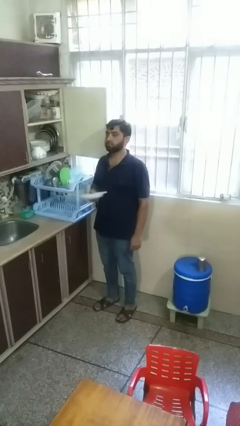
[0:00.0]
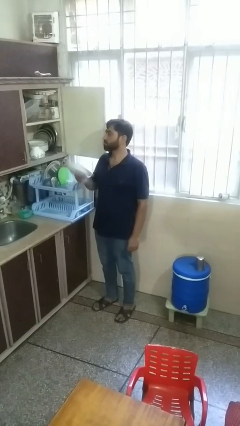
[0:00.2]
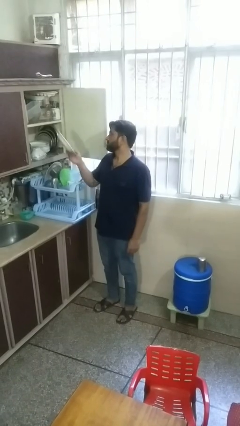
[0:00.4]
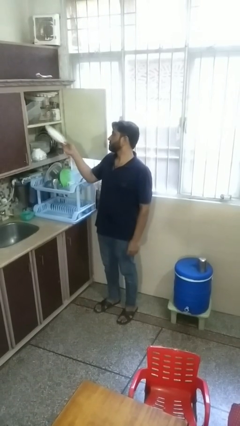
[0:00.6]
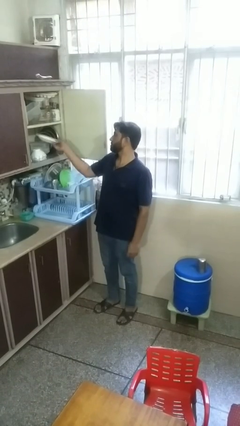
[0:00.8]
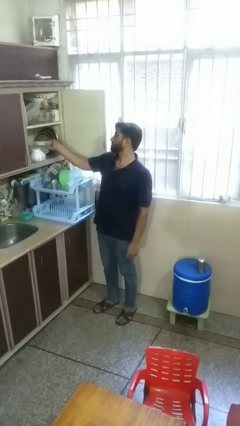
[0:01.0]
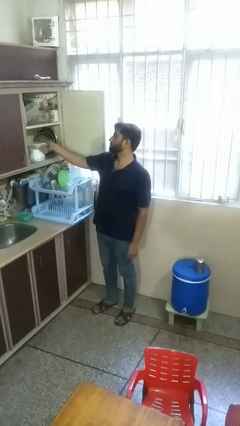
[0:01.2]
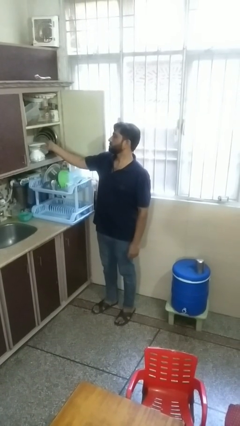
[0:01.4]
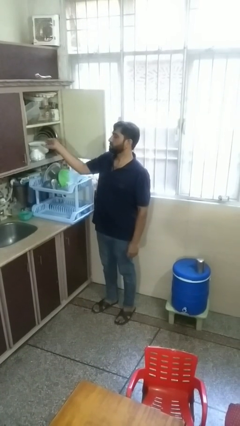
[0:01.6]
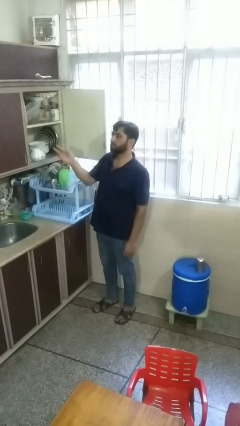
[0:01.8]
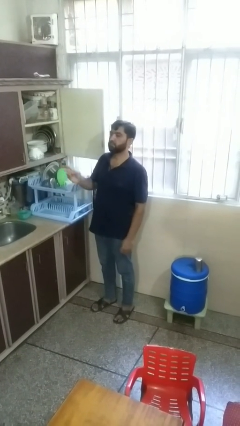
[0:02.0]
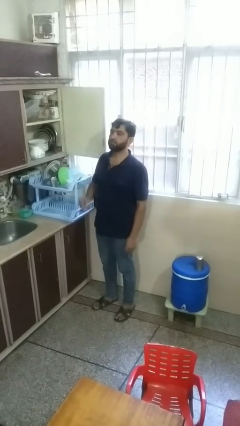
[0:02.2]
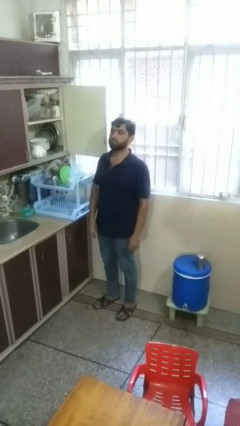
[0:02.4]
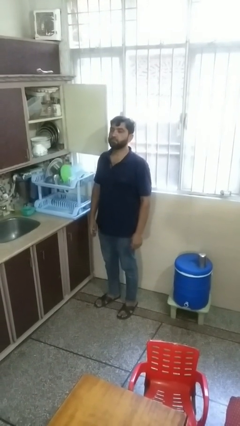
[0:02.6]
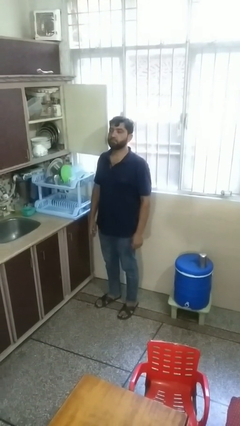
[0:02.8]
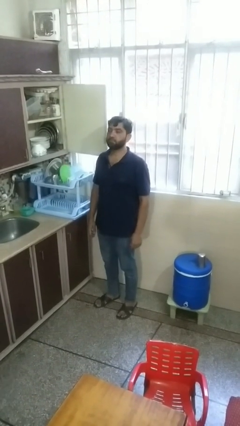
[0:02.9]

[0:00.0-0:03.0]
person puts object in cabinet

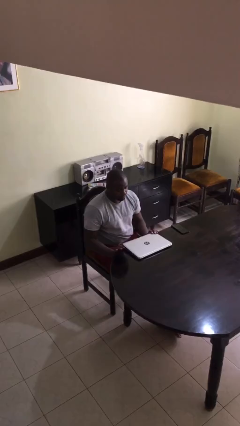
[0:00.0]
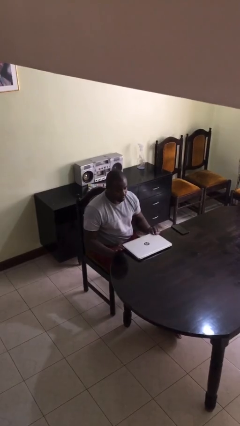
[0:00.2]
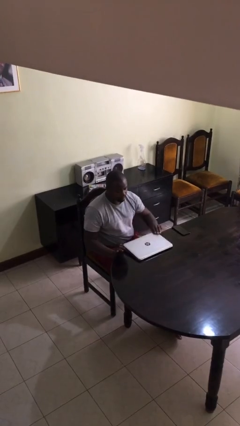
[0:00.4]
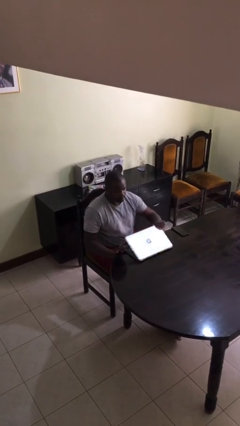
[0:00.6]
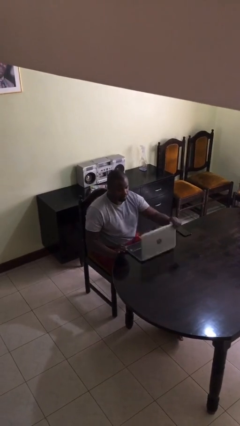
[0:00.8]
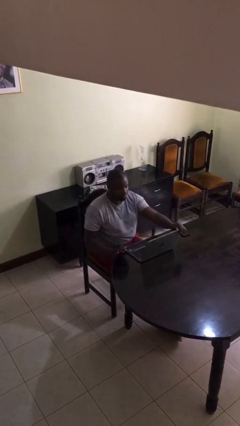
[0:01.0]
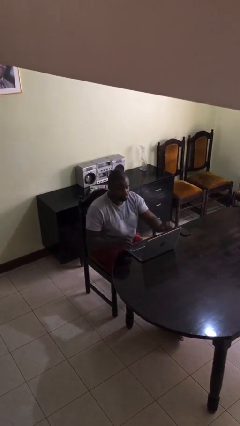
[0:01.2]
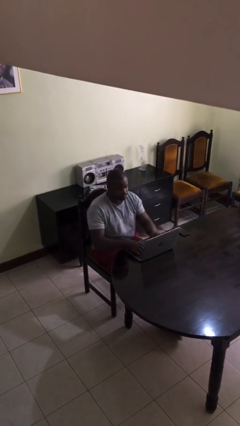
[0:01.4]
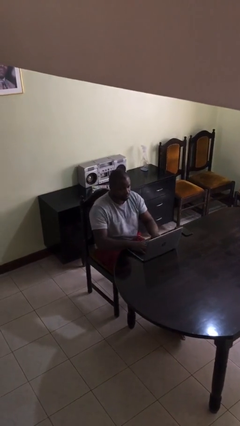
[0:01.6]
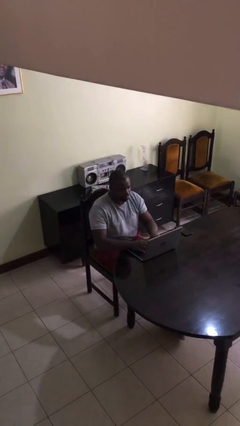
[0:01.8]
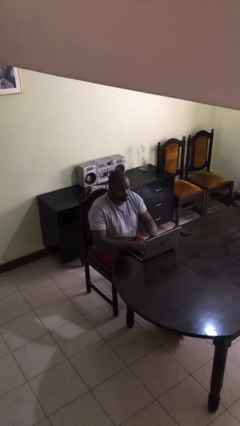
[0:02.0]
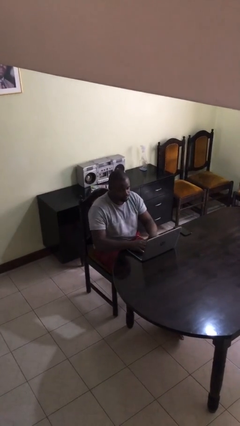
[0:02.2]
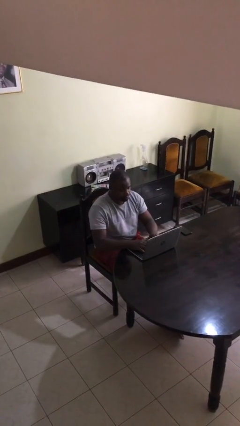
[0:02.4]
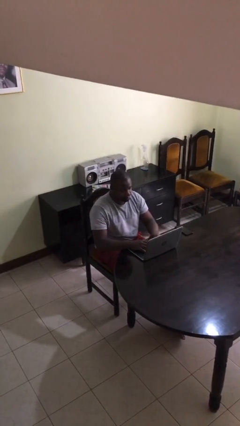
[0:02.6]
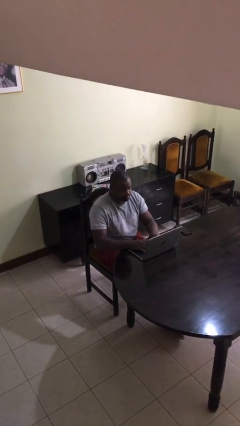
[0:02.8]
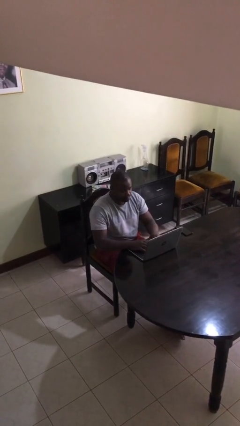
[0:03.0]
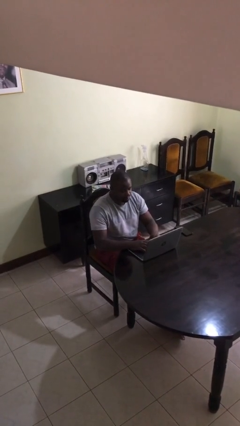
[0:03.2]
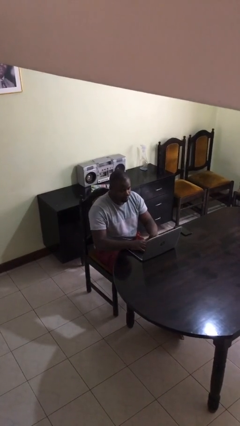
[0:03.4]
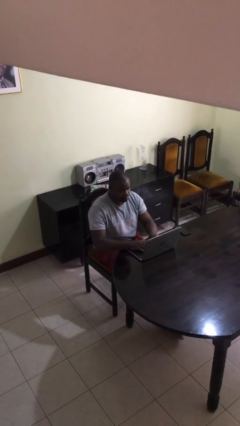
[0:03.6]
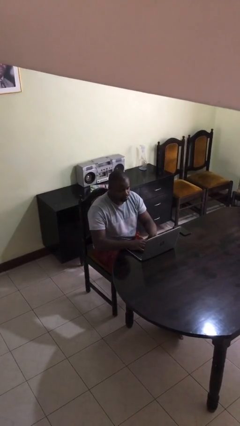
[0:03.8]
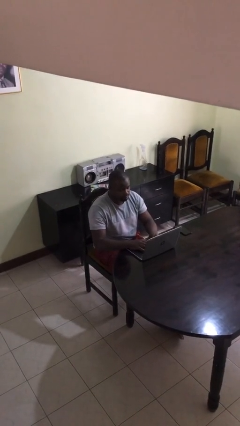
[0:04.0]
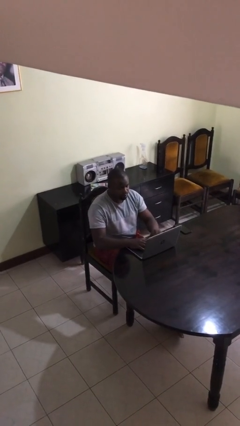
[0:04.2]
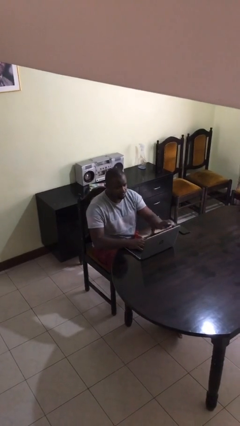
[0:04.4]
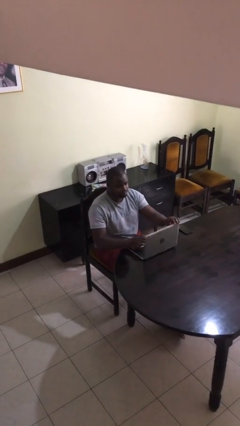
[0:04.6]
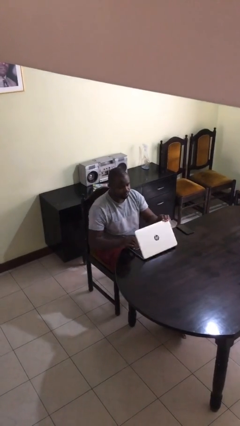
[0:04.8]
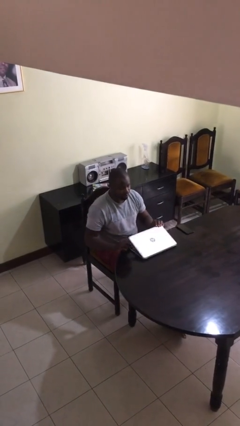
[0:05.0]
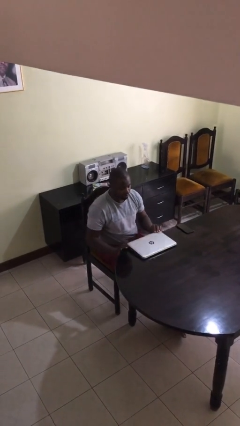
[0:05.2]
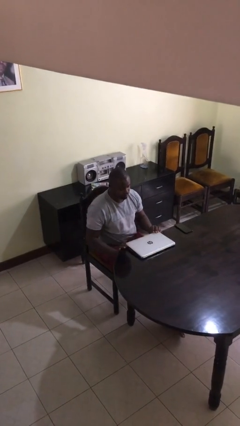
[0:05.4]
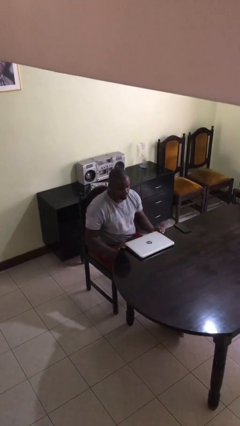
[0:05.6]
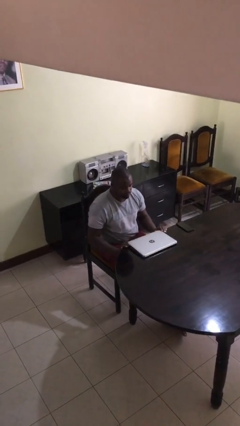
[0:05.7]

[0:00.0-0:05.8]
person interacts with laptop

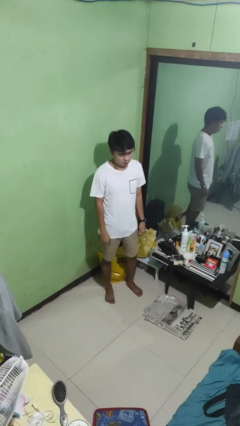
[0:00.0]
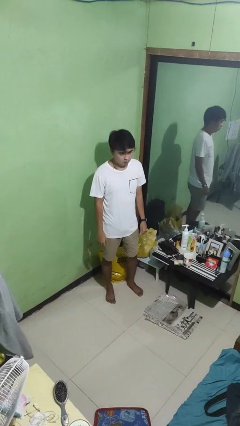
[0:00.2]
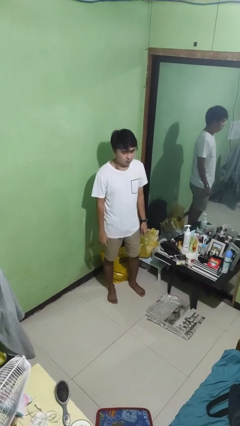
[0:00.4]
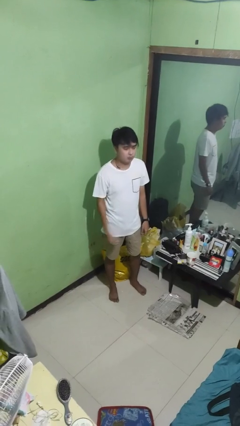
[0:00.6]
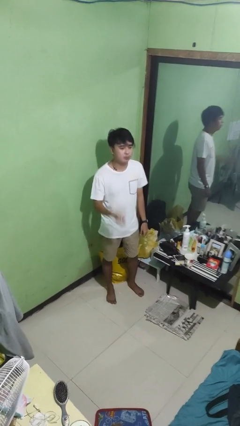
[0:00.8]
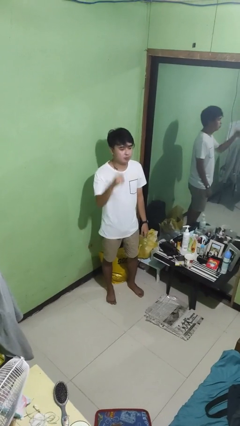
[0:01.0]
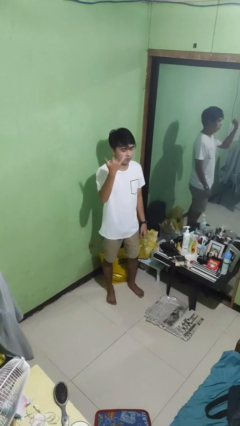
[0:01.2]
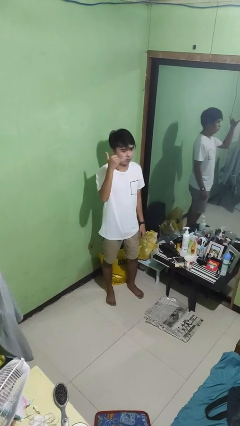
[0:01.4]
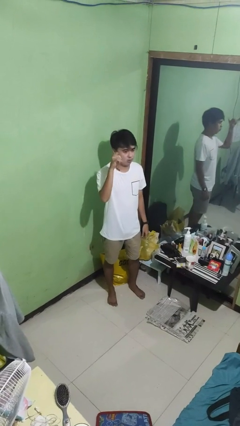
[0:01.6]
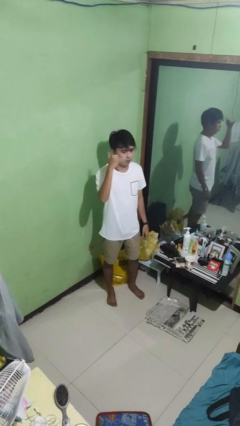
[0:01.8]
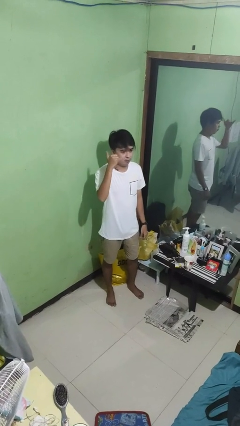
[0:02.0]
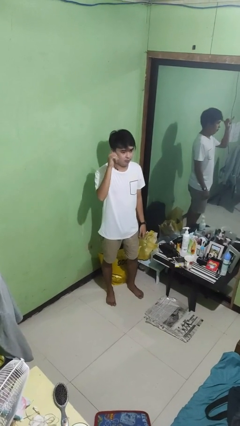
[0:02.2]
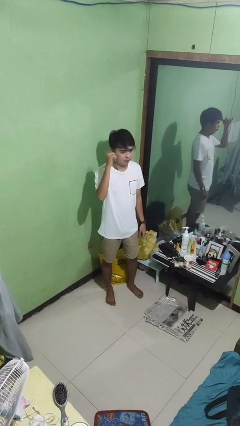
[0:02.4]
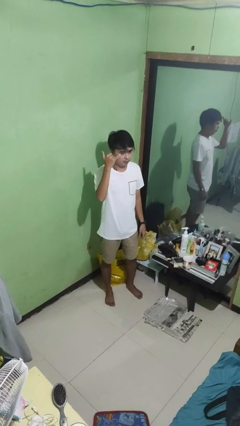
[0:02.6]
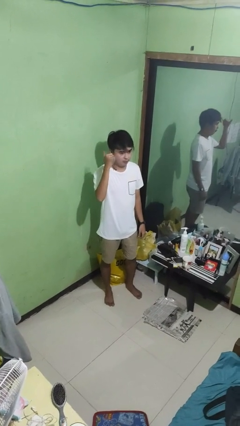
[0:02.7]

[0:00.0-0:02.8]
person gestures hang loose

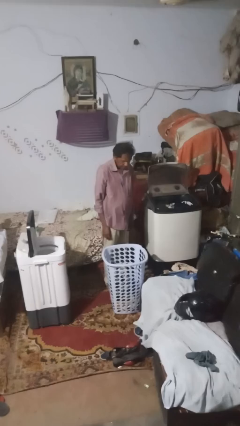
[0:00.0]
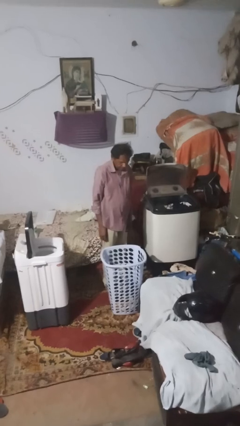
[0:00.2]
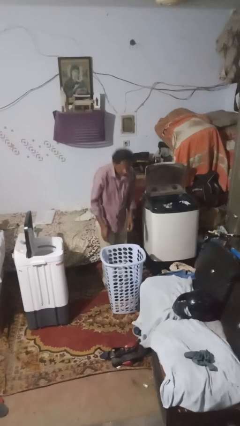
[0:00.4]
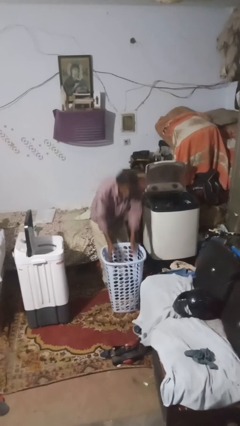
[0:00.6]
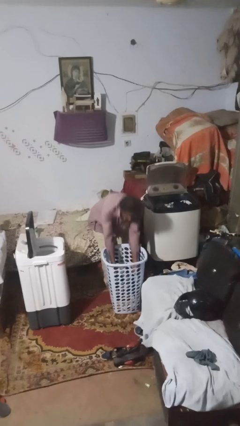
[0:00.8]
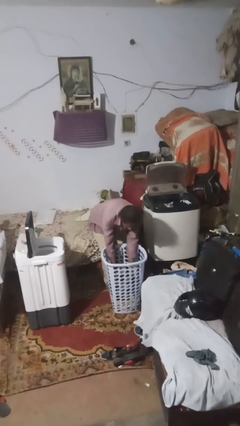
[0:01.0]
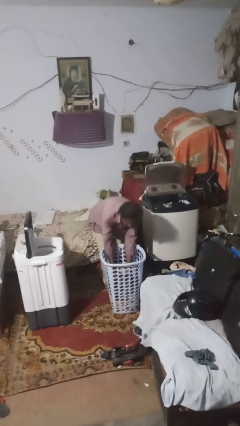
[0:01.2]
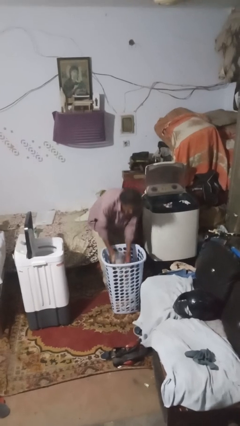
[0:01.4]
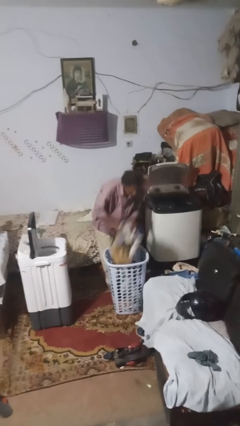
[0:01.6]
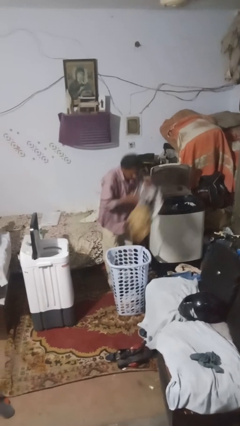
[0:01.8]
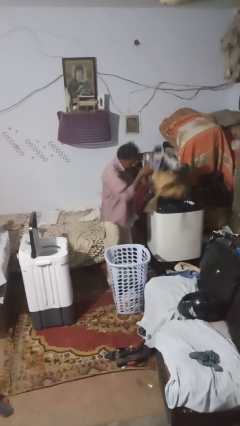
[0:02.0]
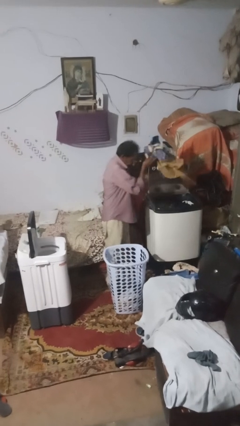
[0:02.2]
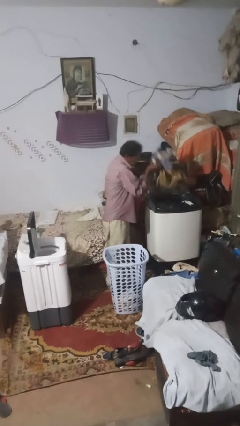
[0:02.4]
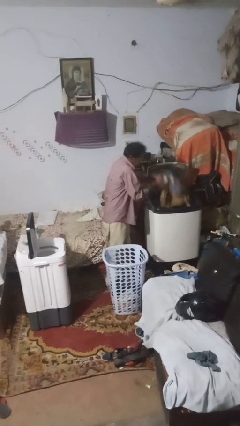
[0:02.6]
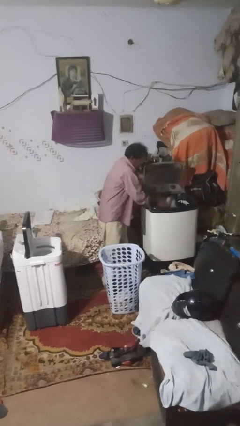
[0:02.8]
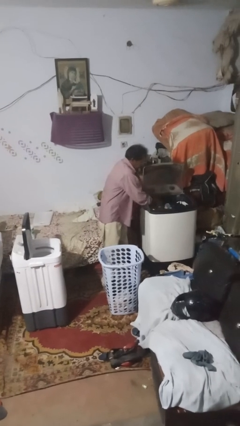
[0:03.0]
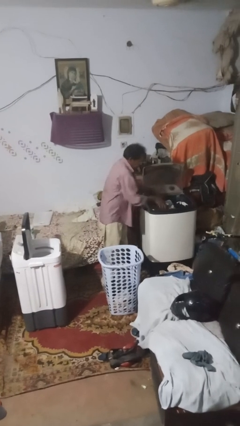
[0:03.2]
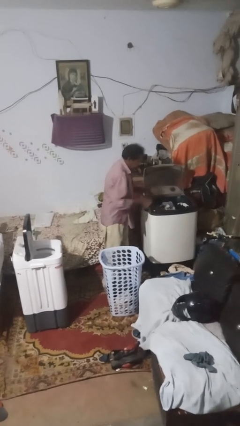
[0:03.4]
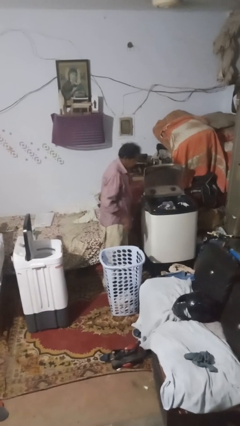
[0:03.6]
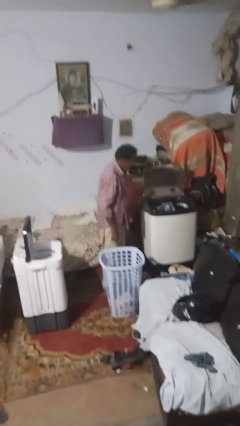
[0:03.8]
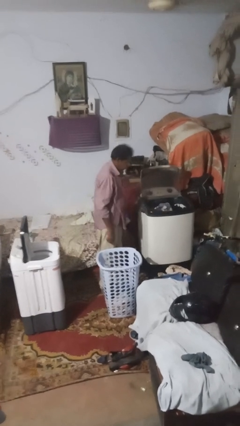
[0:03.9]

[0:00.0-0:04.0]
person loads clotheswasher

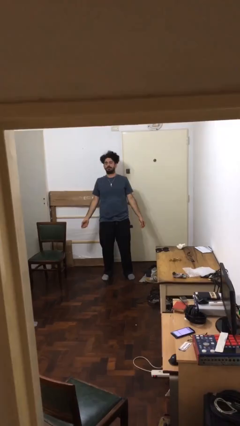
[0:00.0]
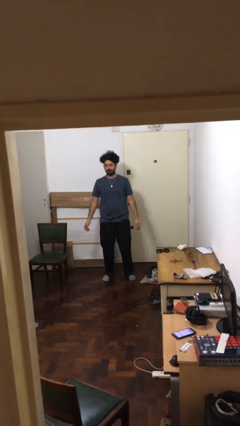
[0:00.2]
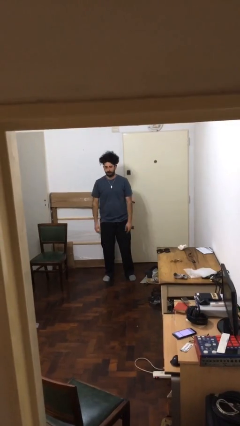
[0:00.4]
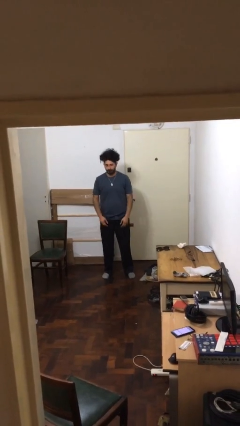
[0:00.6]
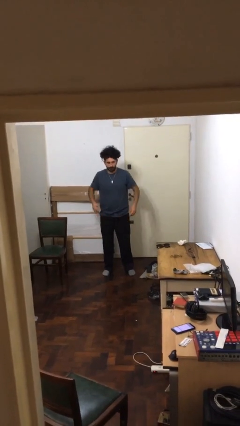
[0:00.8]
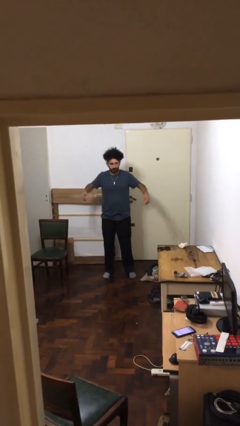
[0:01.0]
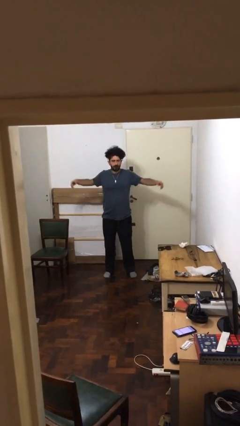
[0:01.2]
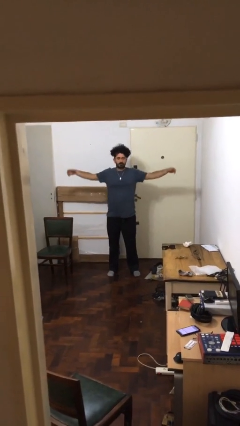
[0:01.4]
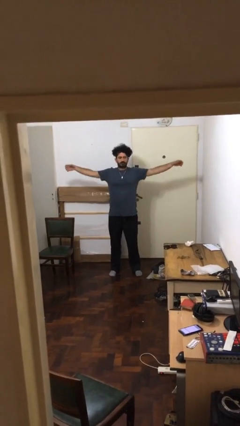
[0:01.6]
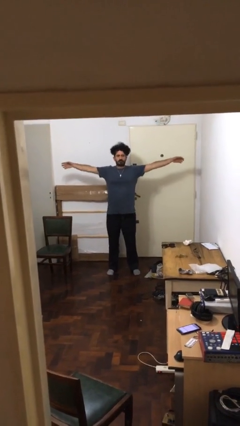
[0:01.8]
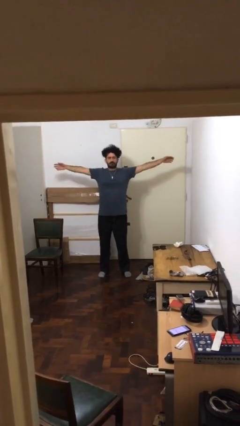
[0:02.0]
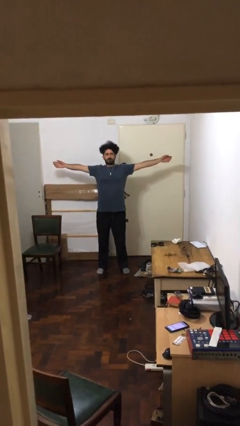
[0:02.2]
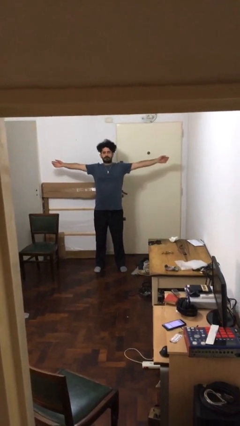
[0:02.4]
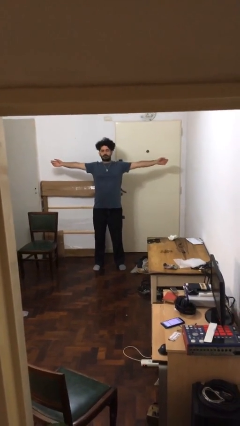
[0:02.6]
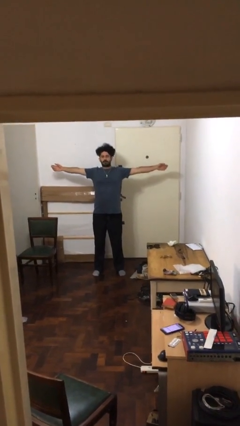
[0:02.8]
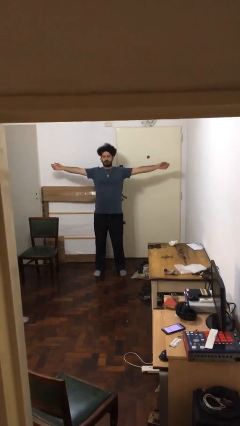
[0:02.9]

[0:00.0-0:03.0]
person stretches arms to side
